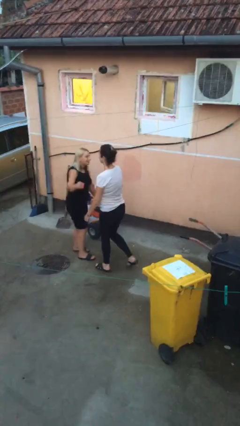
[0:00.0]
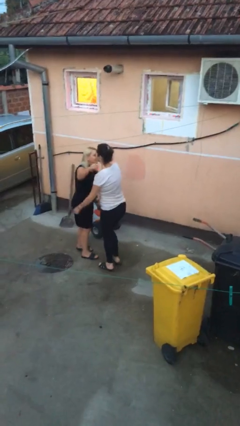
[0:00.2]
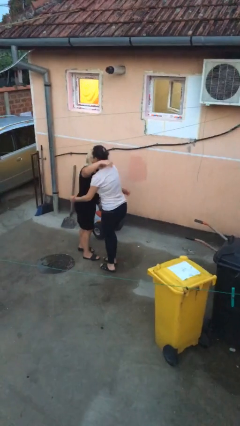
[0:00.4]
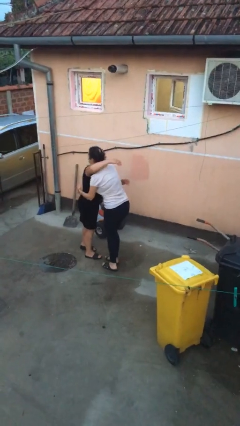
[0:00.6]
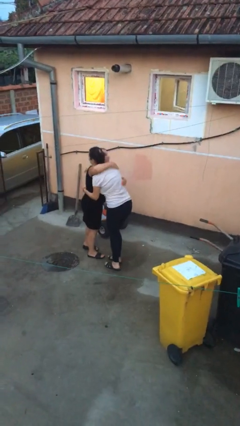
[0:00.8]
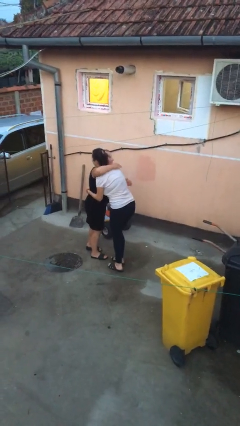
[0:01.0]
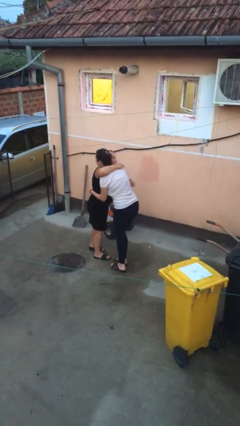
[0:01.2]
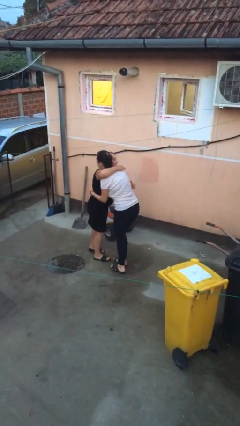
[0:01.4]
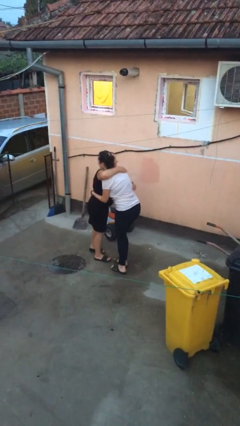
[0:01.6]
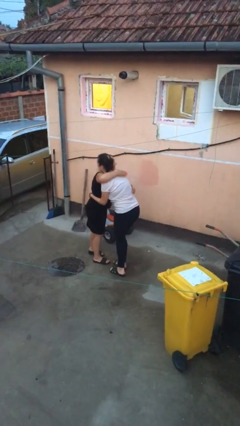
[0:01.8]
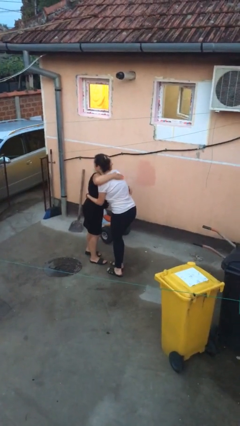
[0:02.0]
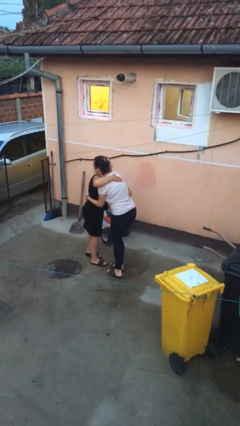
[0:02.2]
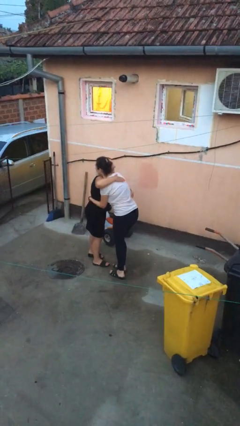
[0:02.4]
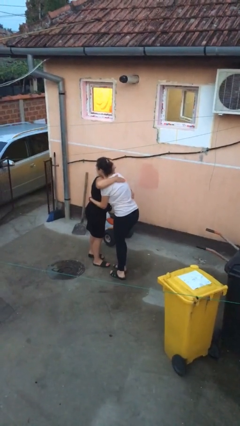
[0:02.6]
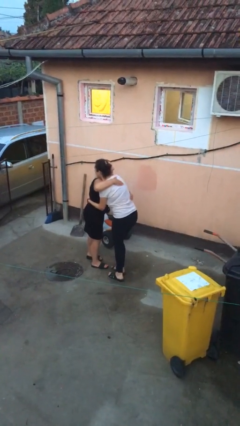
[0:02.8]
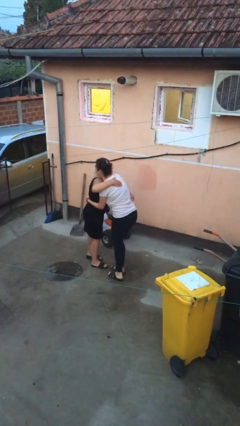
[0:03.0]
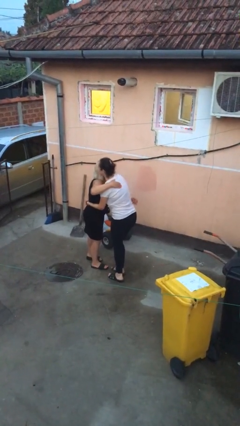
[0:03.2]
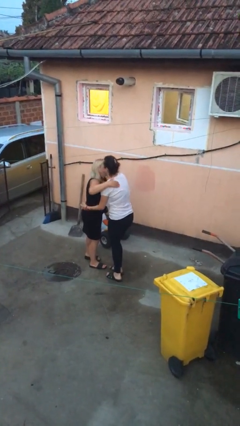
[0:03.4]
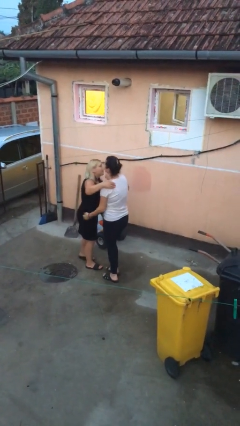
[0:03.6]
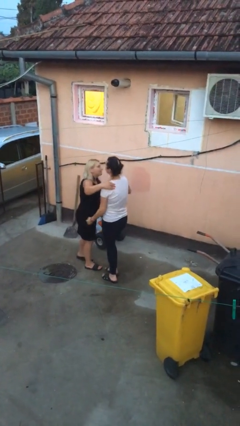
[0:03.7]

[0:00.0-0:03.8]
person embraces person

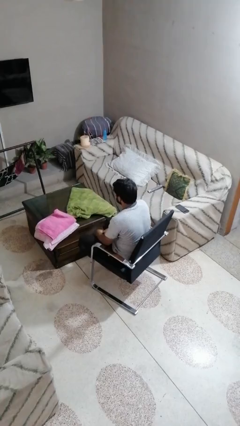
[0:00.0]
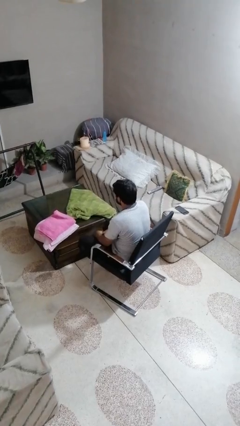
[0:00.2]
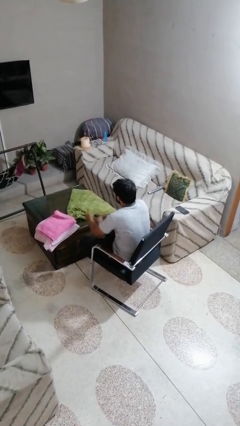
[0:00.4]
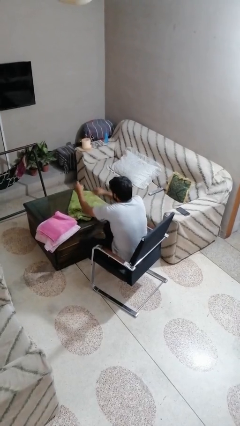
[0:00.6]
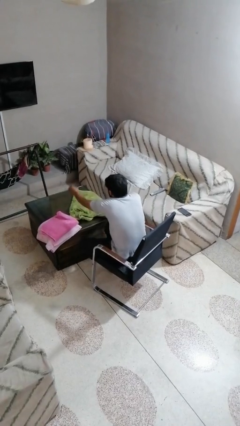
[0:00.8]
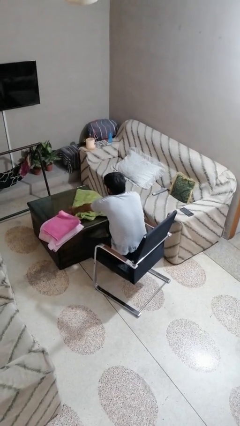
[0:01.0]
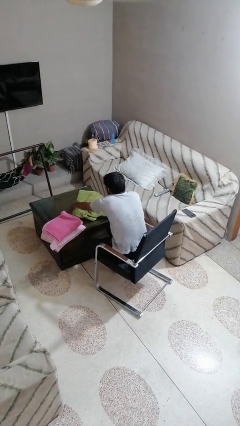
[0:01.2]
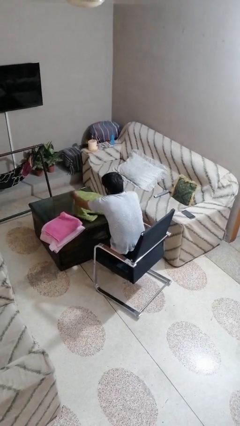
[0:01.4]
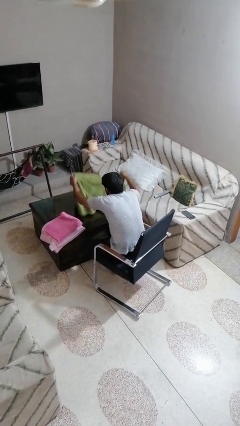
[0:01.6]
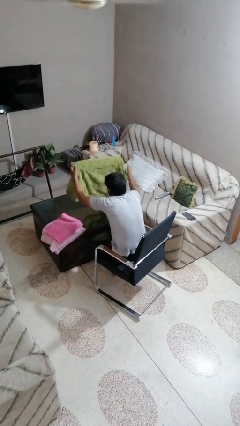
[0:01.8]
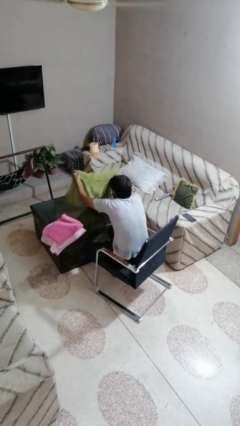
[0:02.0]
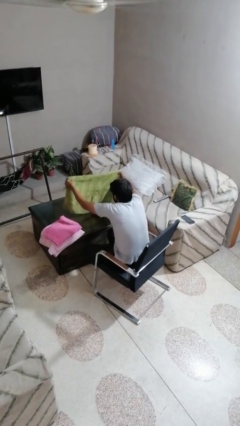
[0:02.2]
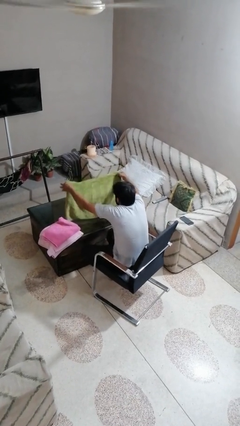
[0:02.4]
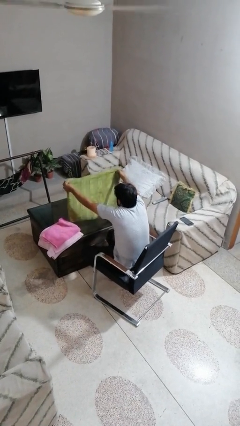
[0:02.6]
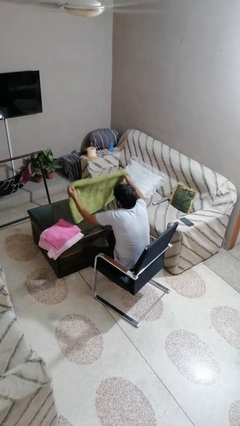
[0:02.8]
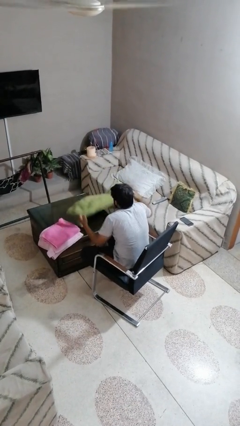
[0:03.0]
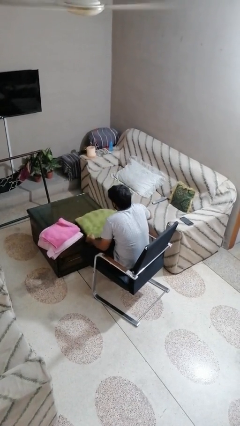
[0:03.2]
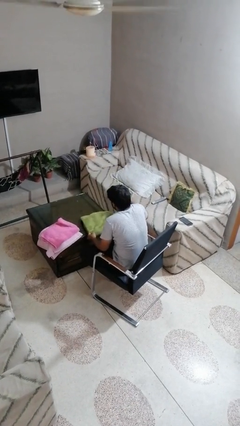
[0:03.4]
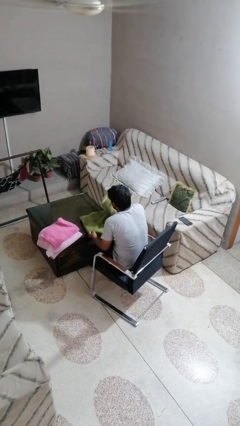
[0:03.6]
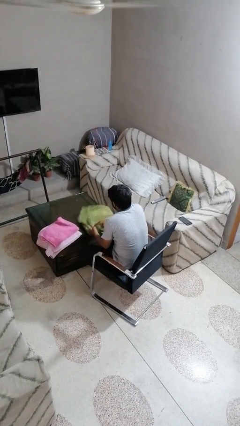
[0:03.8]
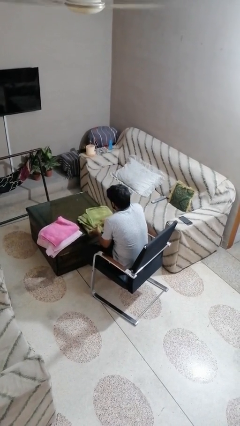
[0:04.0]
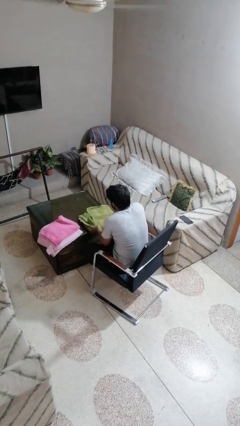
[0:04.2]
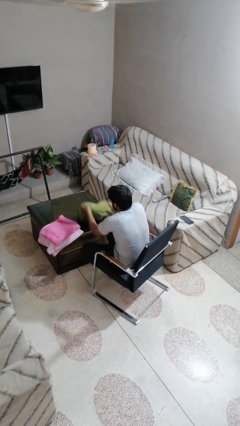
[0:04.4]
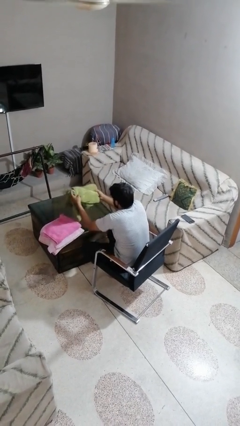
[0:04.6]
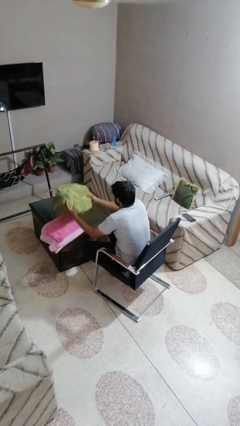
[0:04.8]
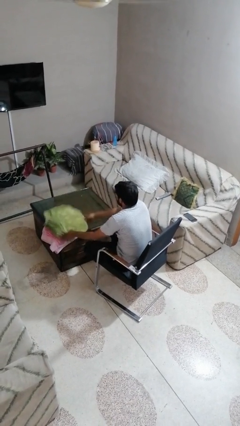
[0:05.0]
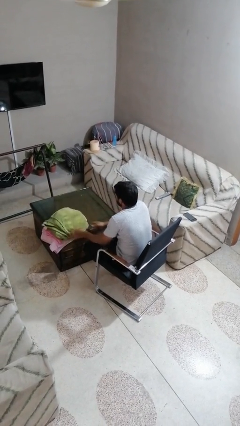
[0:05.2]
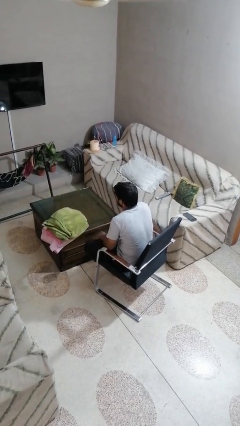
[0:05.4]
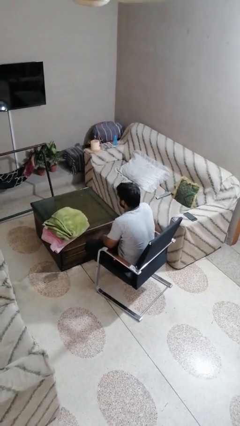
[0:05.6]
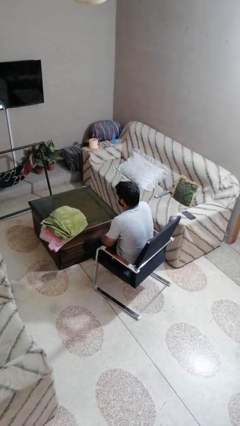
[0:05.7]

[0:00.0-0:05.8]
person folds towel

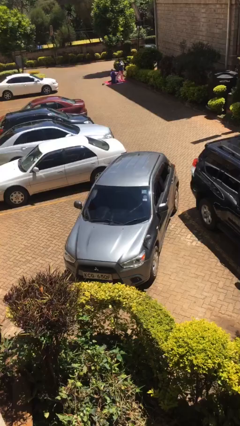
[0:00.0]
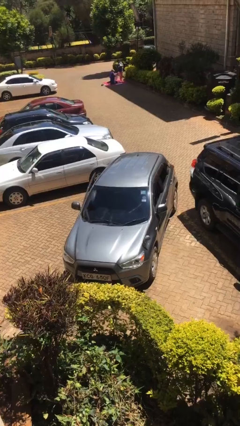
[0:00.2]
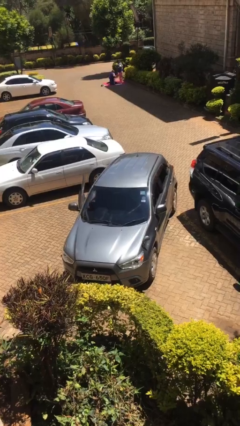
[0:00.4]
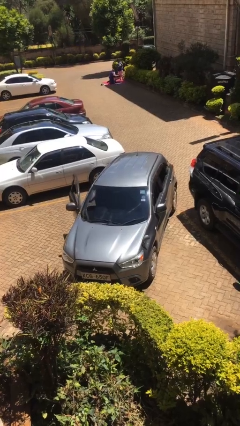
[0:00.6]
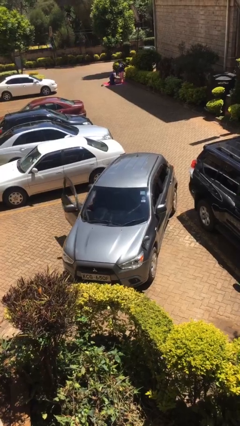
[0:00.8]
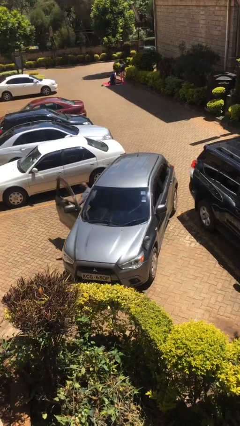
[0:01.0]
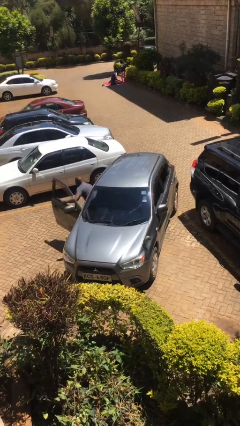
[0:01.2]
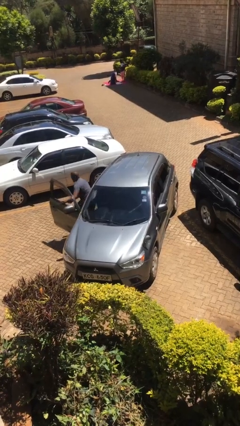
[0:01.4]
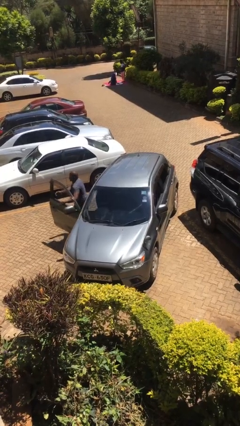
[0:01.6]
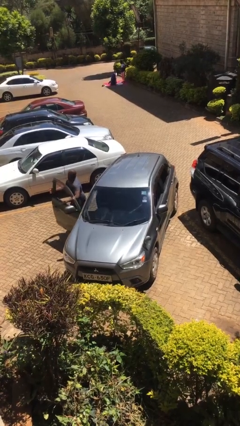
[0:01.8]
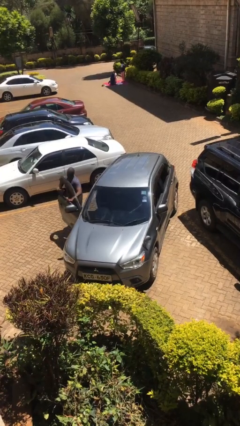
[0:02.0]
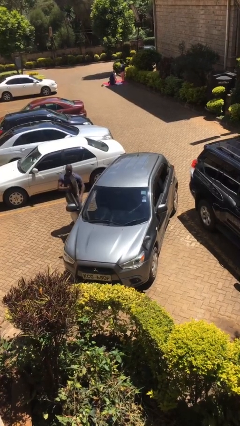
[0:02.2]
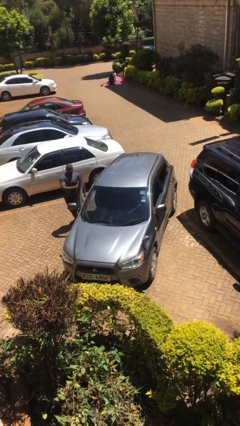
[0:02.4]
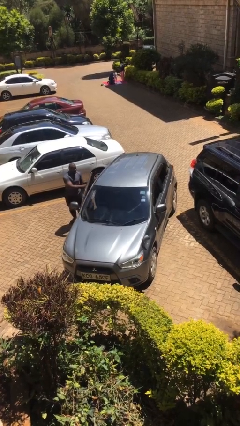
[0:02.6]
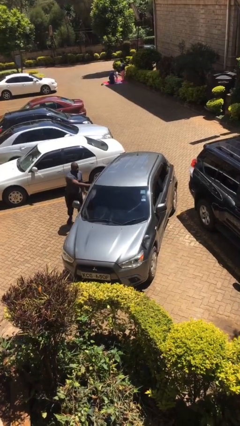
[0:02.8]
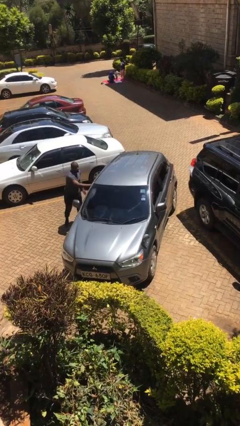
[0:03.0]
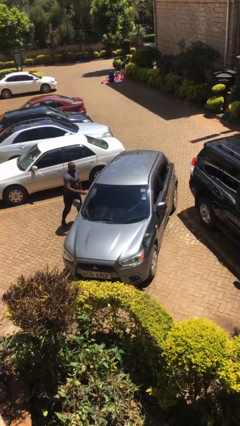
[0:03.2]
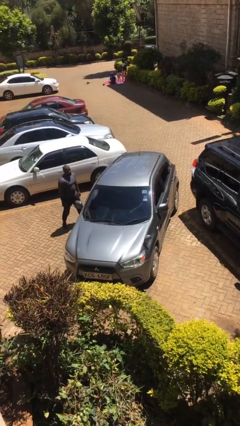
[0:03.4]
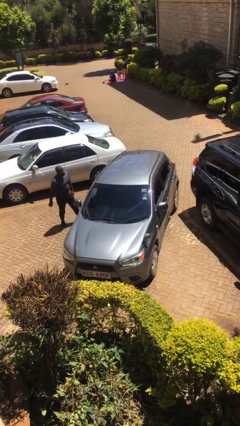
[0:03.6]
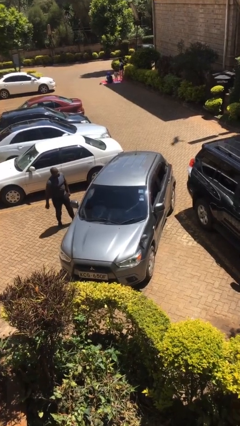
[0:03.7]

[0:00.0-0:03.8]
car drops off person

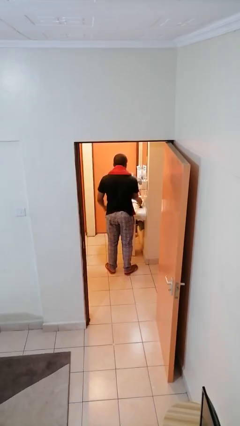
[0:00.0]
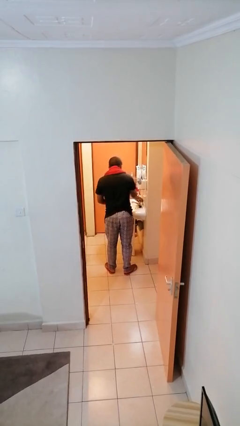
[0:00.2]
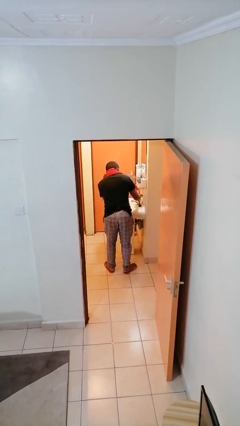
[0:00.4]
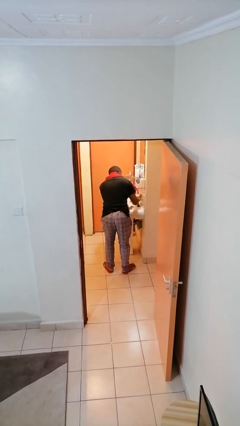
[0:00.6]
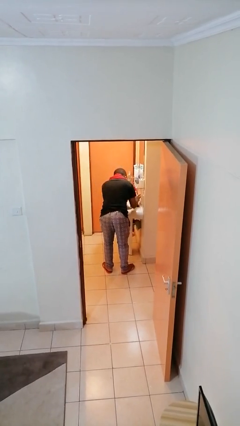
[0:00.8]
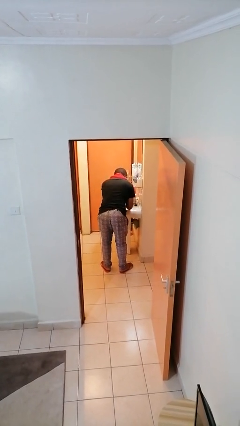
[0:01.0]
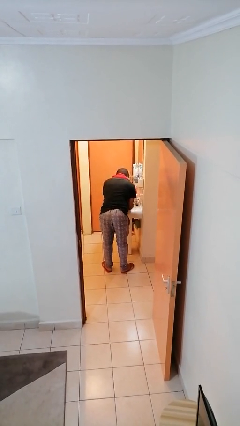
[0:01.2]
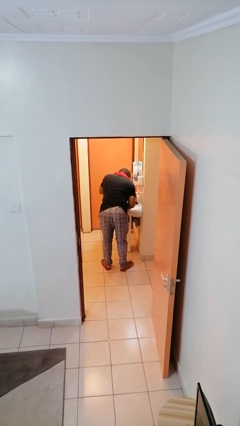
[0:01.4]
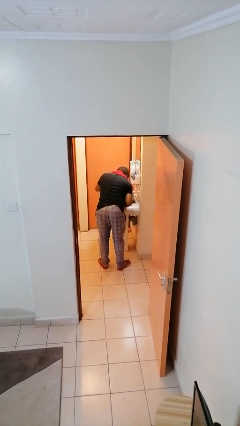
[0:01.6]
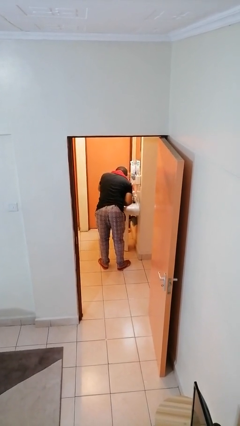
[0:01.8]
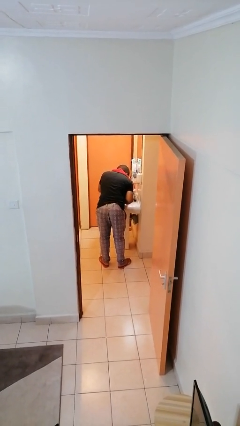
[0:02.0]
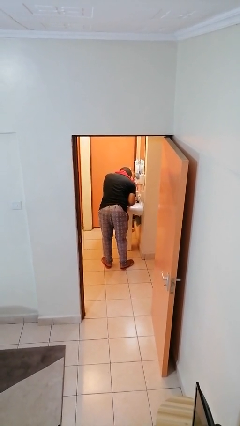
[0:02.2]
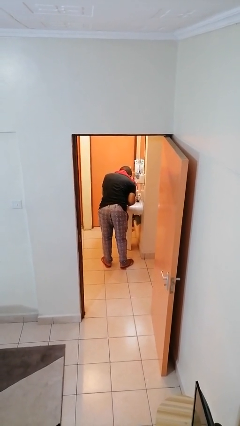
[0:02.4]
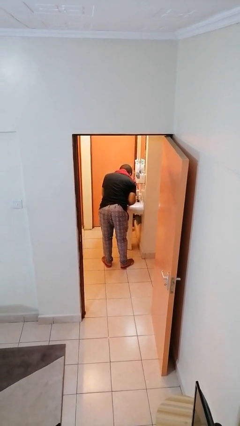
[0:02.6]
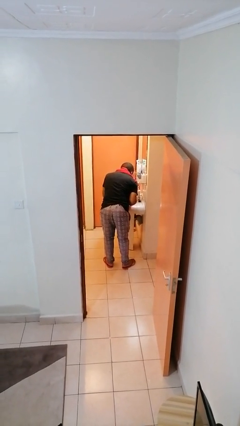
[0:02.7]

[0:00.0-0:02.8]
person washes face

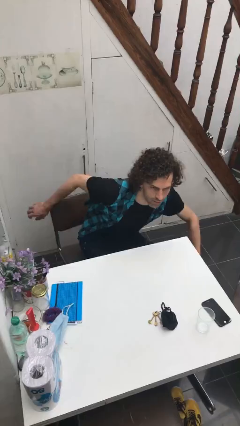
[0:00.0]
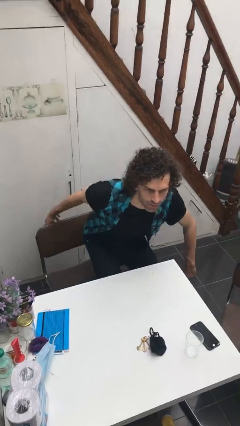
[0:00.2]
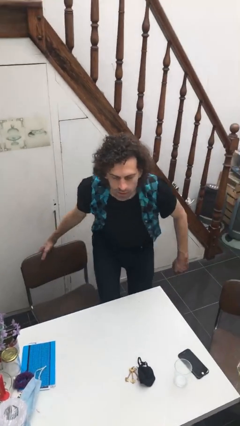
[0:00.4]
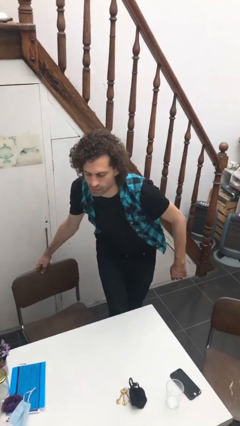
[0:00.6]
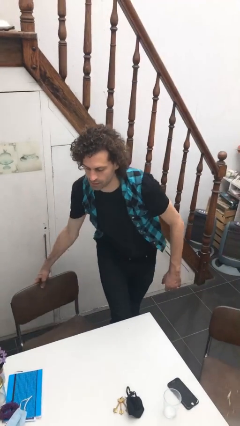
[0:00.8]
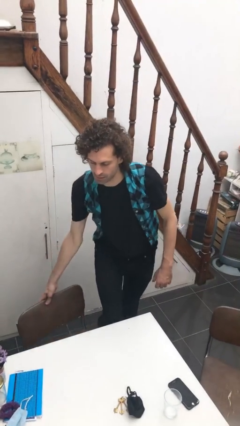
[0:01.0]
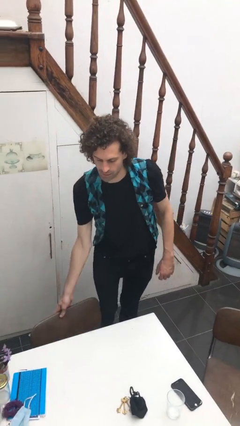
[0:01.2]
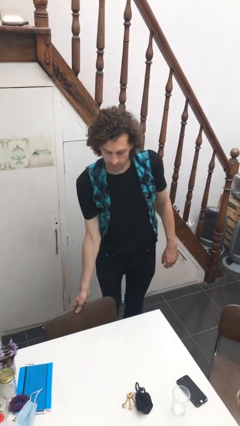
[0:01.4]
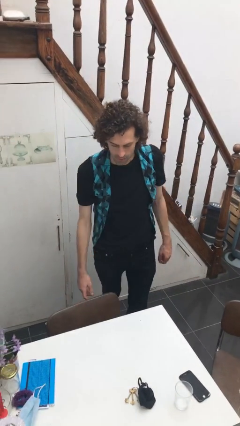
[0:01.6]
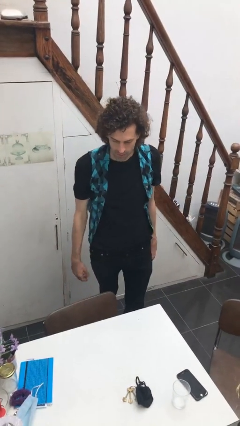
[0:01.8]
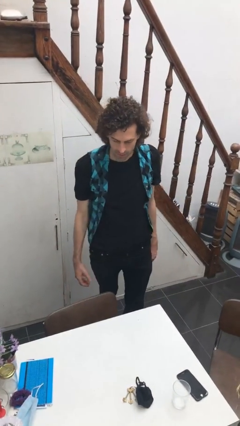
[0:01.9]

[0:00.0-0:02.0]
person stands up
